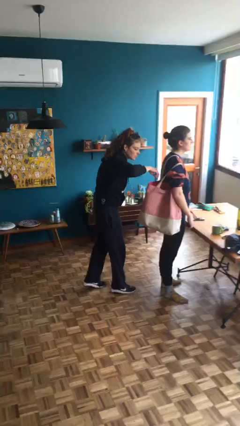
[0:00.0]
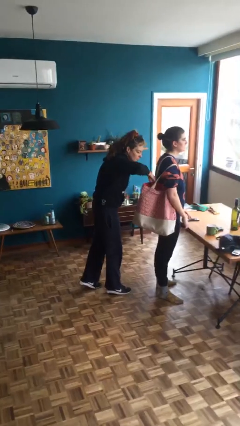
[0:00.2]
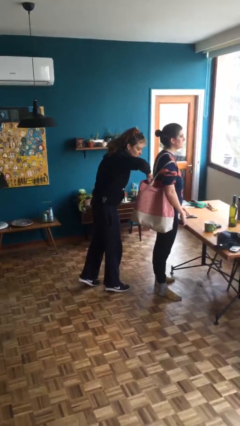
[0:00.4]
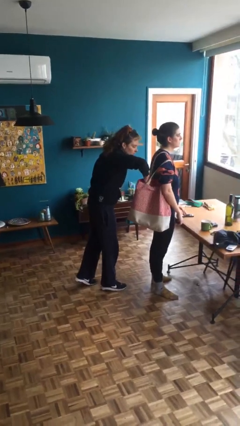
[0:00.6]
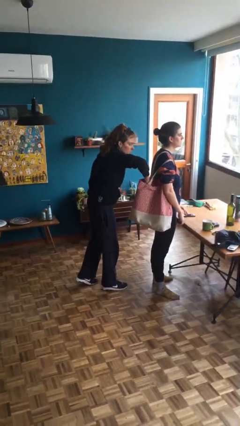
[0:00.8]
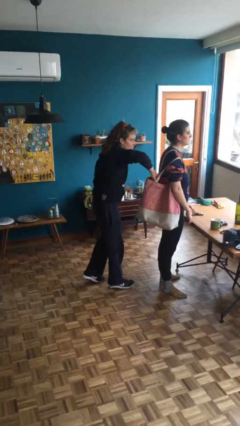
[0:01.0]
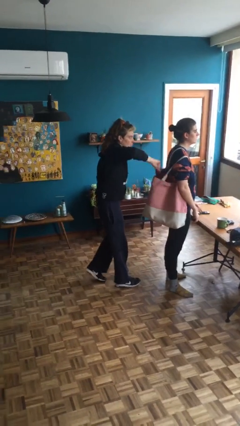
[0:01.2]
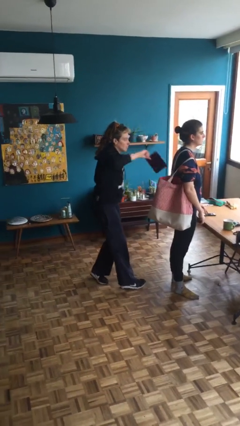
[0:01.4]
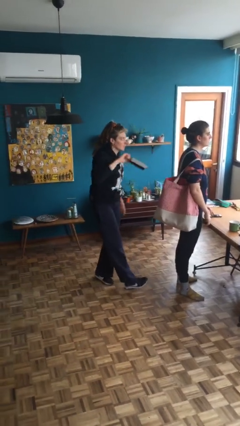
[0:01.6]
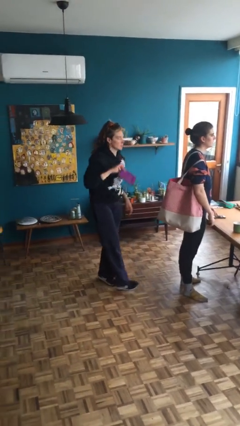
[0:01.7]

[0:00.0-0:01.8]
person steals object from person

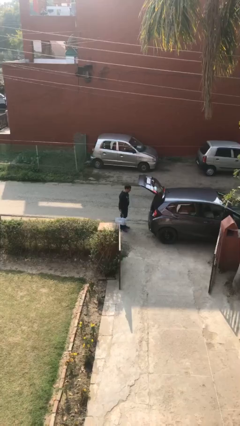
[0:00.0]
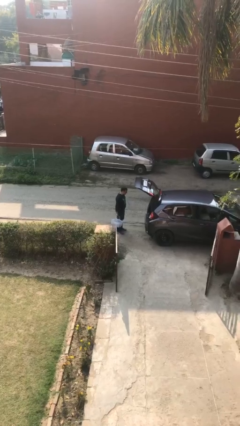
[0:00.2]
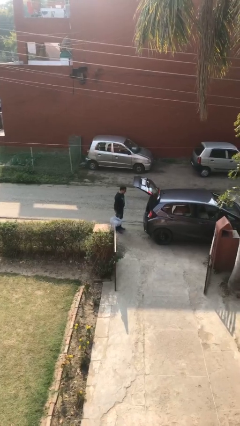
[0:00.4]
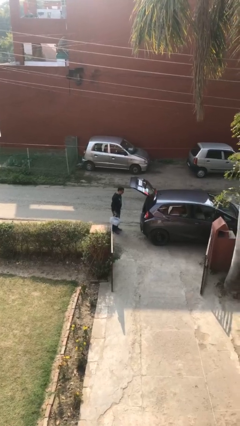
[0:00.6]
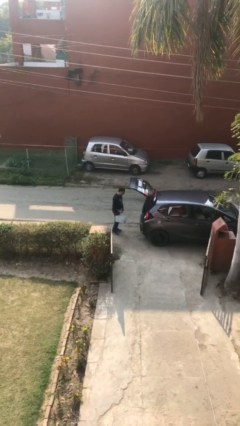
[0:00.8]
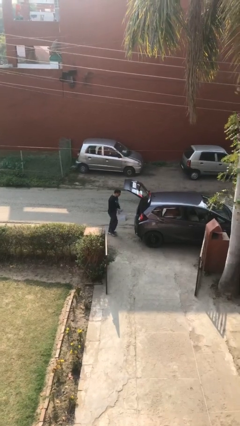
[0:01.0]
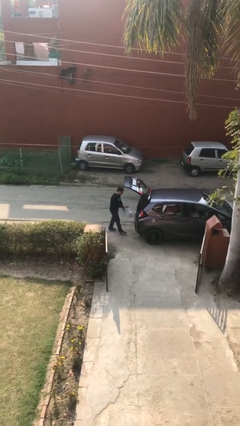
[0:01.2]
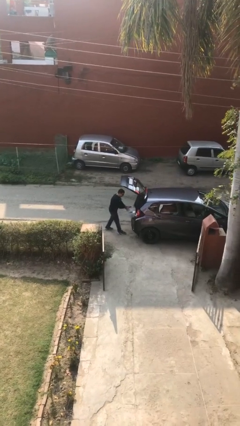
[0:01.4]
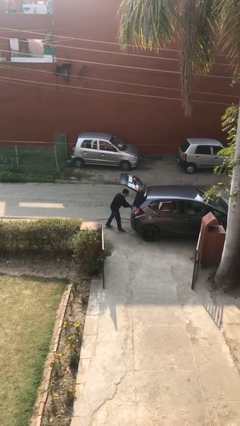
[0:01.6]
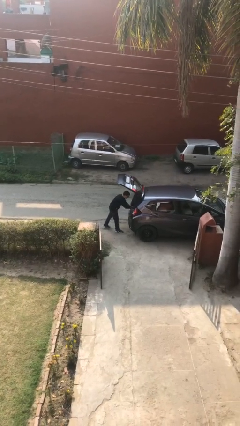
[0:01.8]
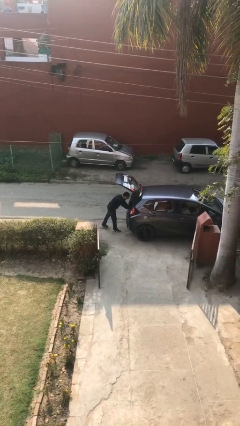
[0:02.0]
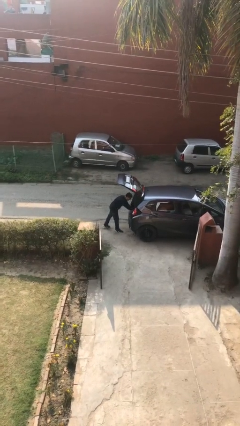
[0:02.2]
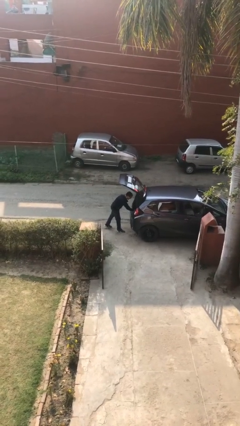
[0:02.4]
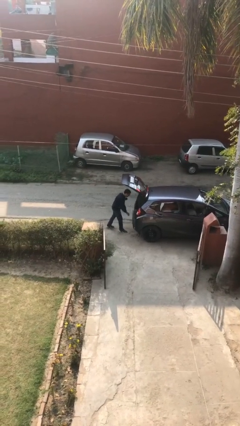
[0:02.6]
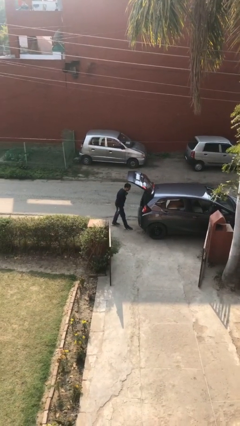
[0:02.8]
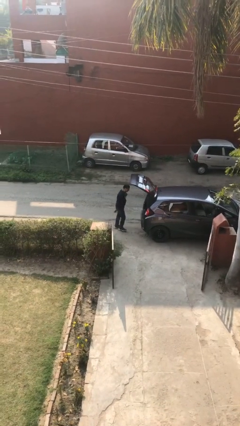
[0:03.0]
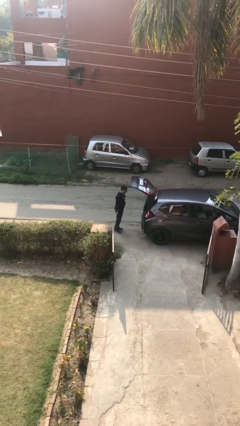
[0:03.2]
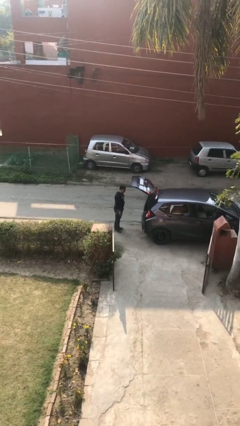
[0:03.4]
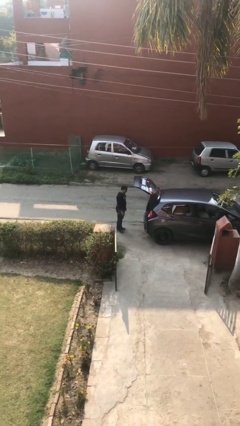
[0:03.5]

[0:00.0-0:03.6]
person loads car

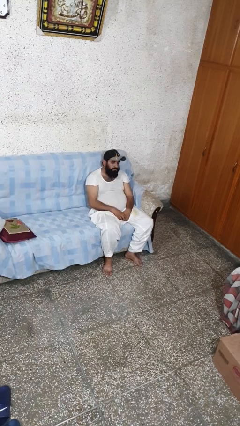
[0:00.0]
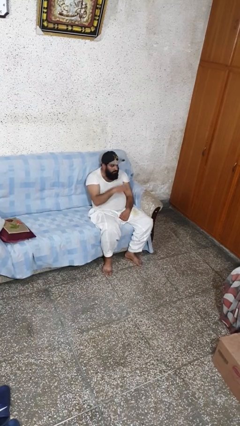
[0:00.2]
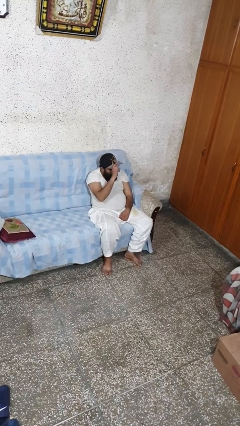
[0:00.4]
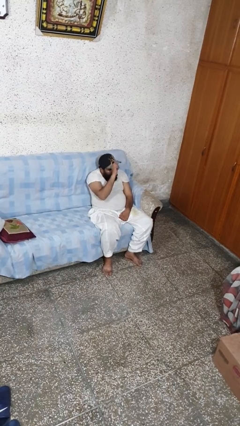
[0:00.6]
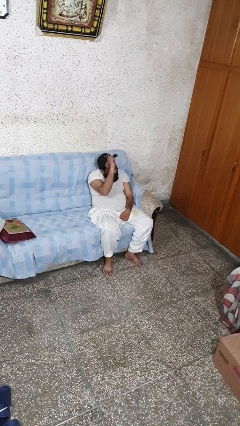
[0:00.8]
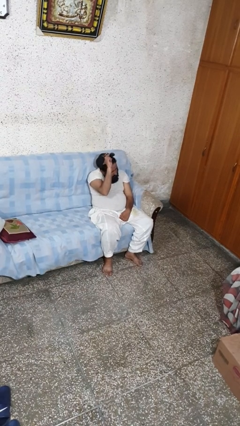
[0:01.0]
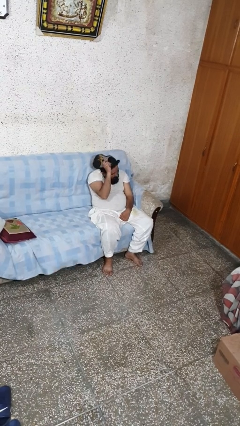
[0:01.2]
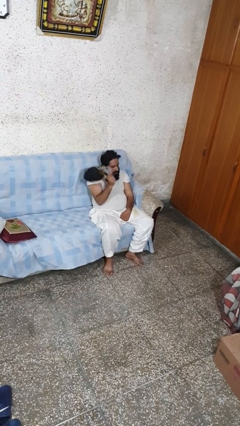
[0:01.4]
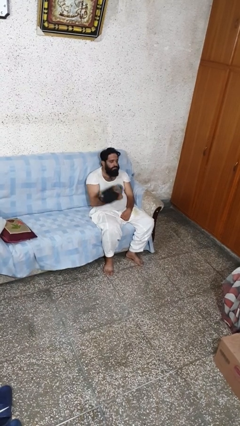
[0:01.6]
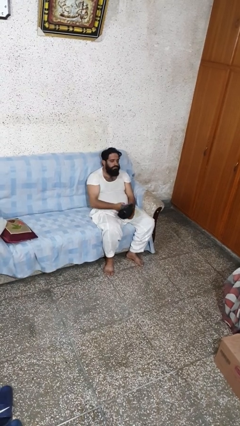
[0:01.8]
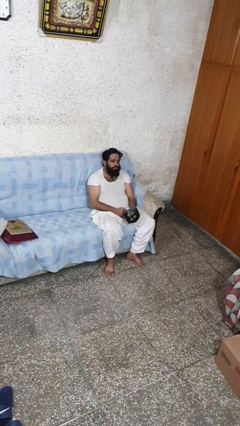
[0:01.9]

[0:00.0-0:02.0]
person takes off hat

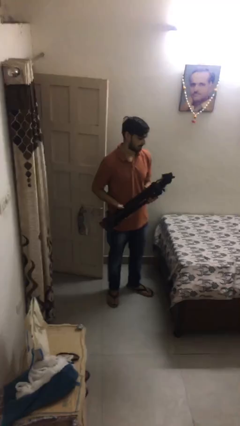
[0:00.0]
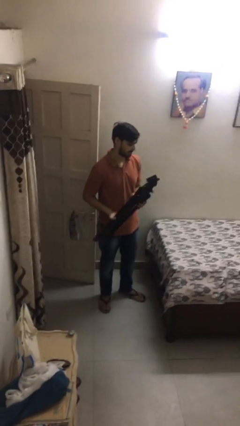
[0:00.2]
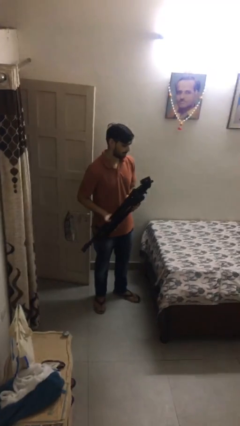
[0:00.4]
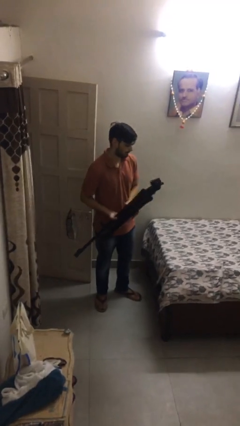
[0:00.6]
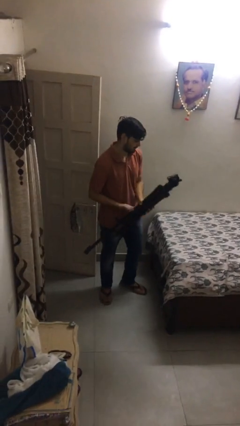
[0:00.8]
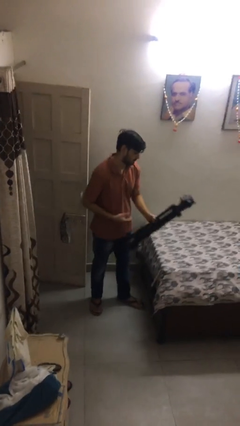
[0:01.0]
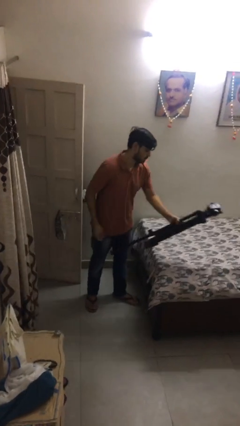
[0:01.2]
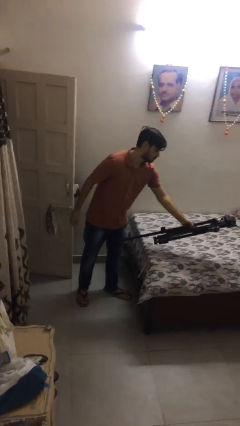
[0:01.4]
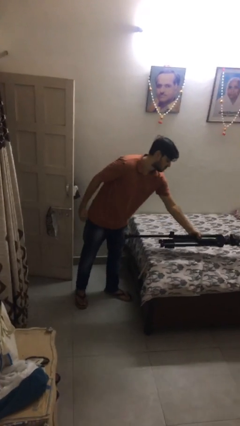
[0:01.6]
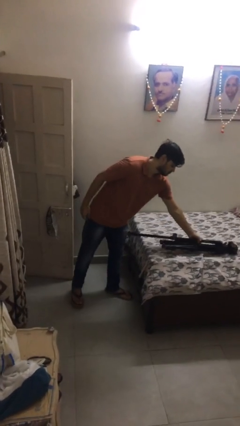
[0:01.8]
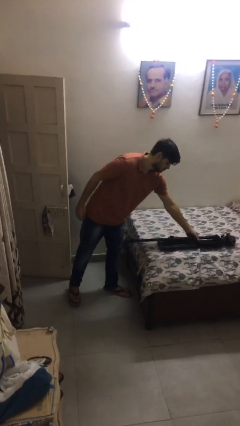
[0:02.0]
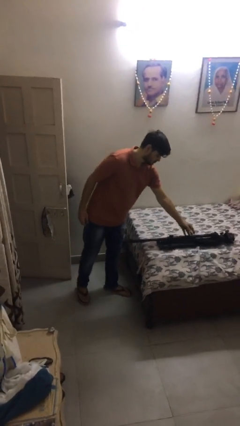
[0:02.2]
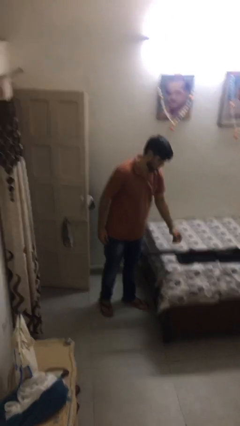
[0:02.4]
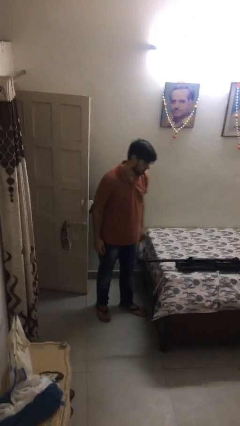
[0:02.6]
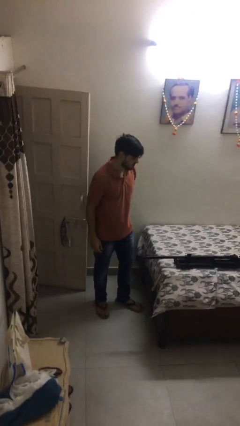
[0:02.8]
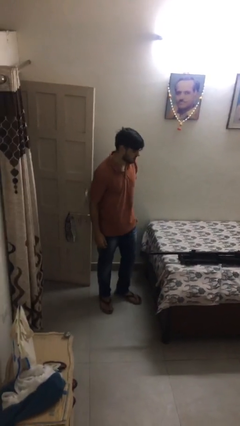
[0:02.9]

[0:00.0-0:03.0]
person puts down object on bed

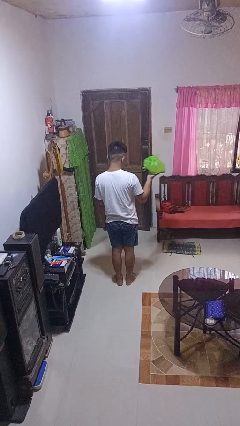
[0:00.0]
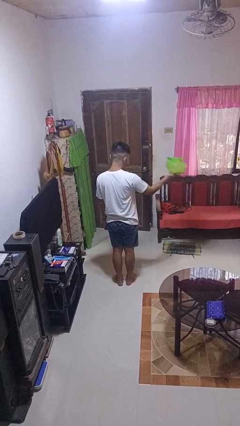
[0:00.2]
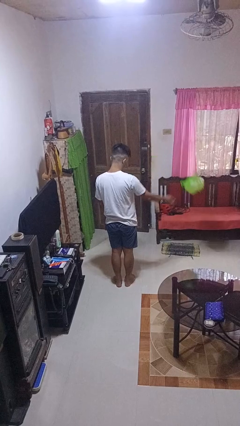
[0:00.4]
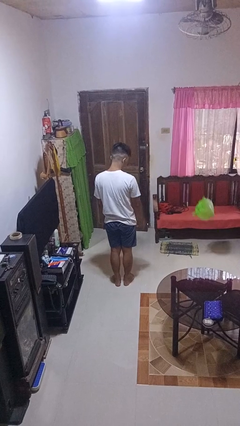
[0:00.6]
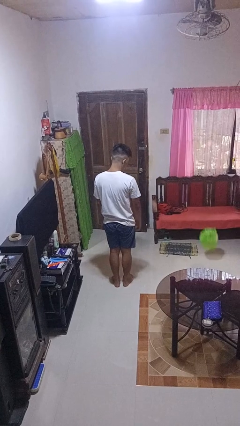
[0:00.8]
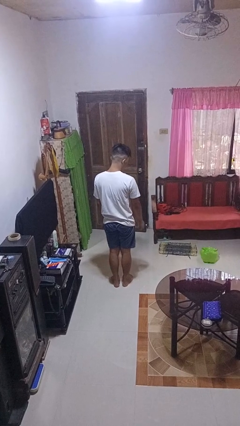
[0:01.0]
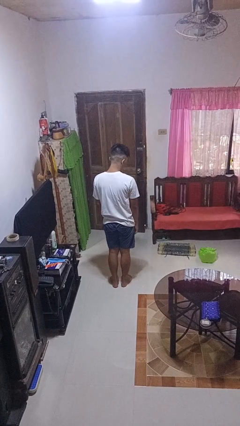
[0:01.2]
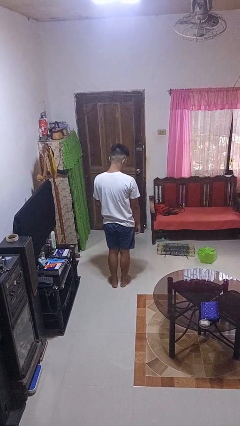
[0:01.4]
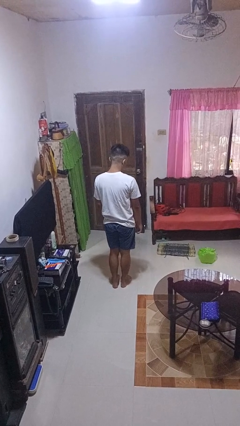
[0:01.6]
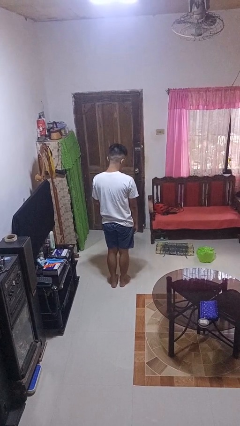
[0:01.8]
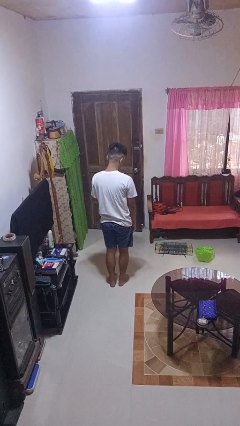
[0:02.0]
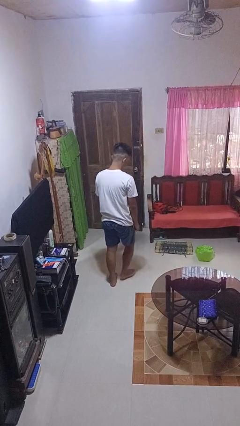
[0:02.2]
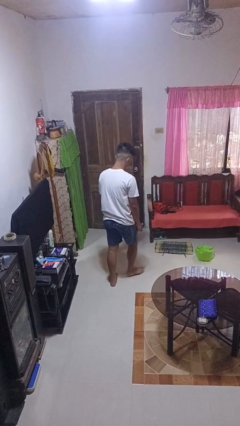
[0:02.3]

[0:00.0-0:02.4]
person throws object to ground

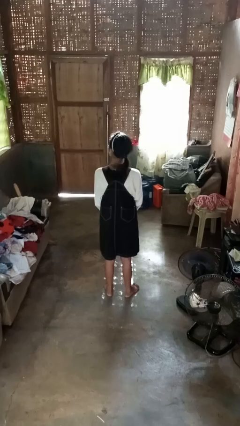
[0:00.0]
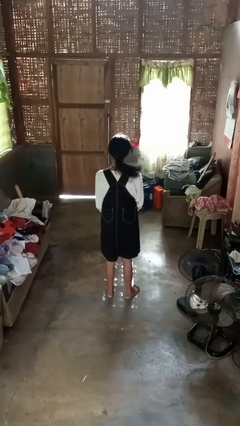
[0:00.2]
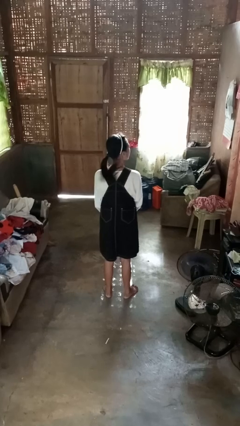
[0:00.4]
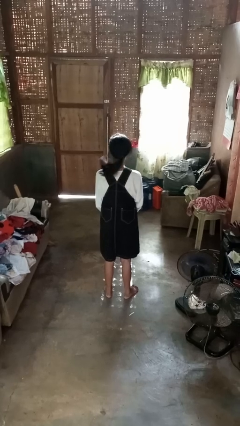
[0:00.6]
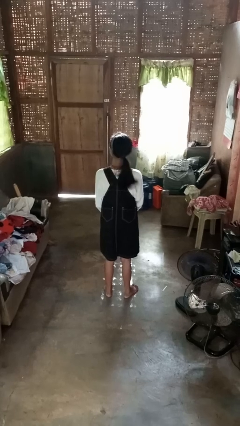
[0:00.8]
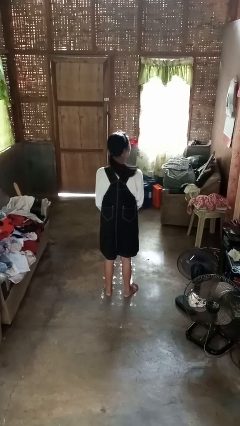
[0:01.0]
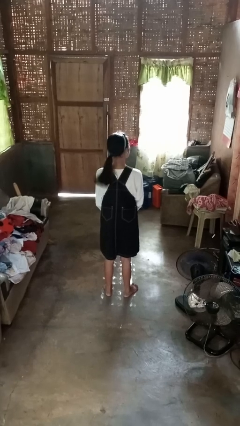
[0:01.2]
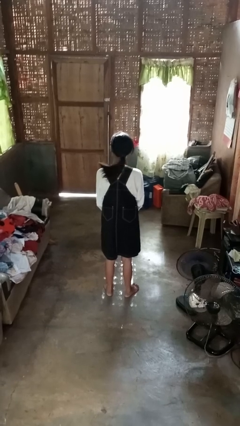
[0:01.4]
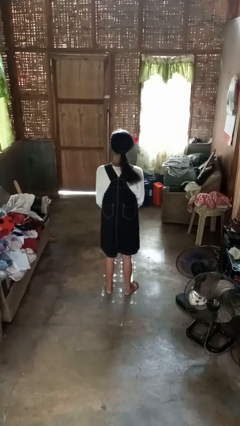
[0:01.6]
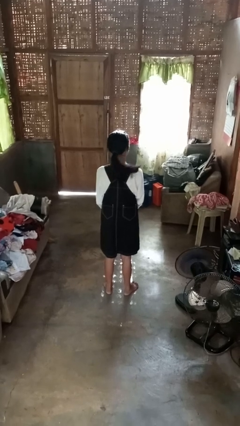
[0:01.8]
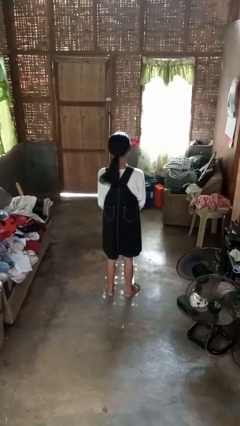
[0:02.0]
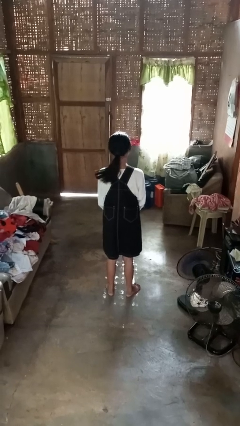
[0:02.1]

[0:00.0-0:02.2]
person shakes head

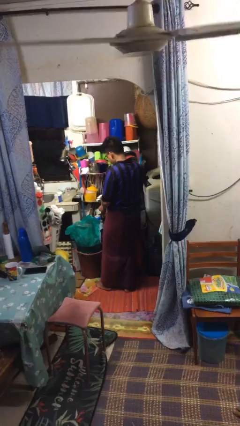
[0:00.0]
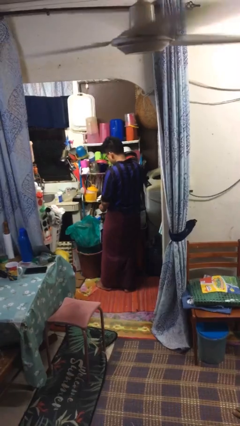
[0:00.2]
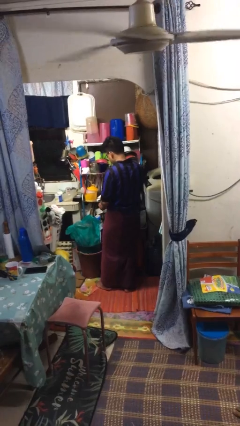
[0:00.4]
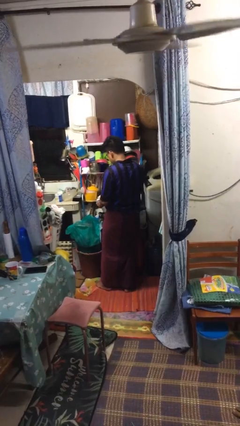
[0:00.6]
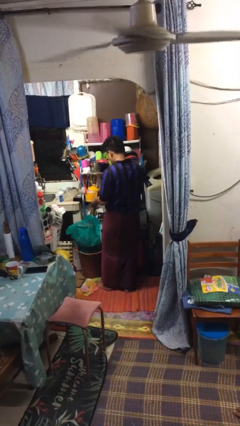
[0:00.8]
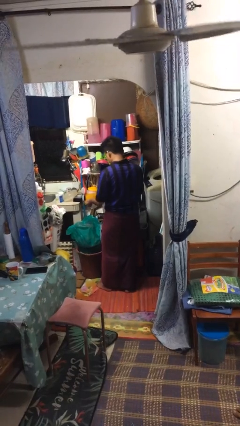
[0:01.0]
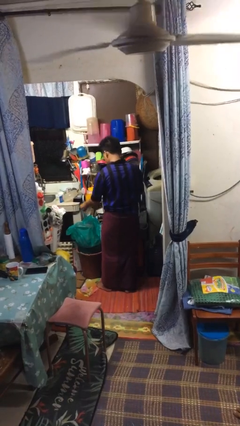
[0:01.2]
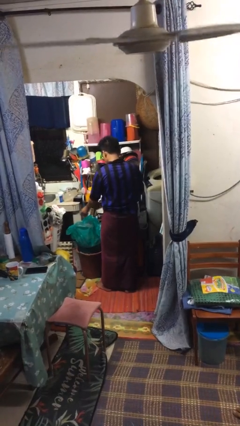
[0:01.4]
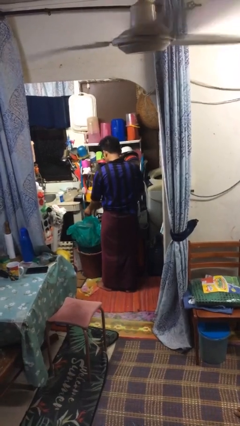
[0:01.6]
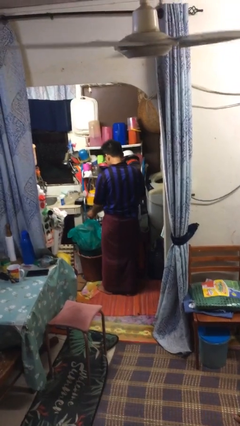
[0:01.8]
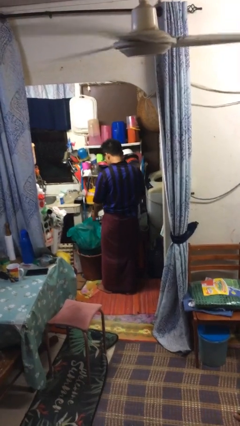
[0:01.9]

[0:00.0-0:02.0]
person discards trash

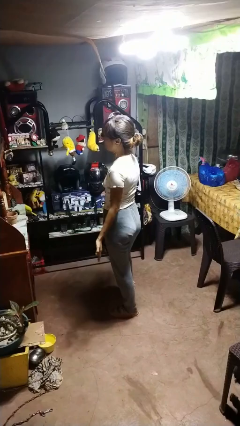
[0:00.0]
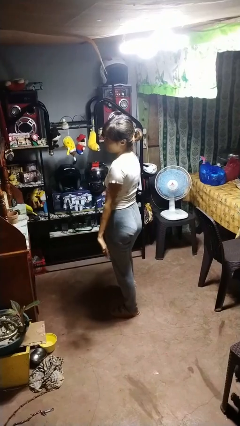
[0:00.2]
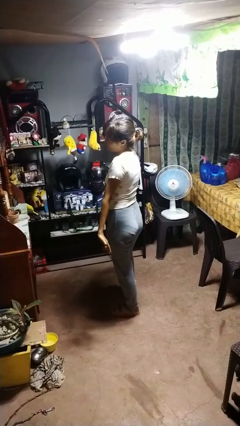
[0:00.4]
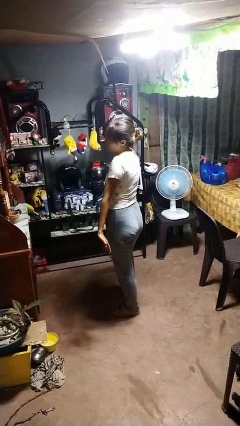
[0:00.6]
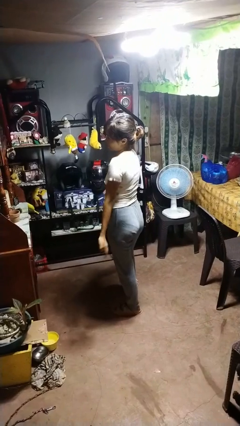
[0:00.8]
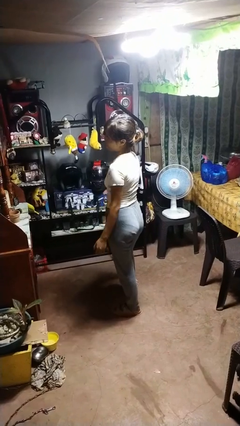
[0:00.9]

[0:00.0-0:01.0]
person shrugs
